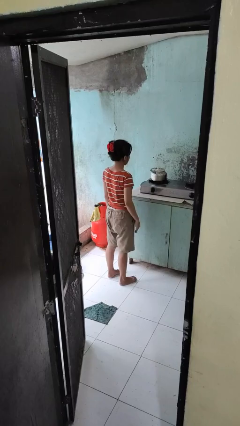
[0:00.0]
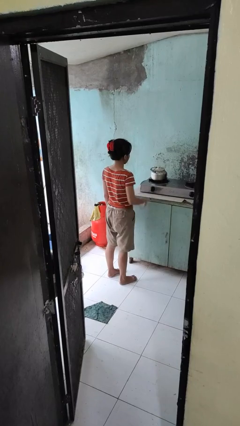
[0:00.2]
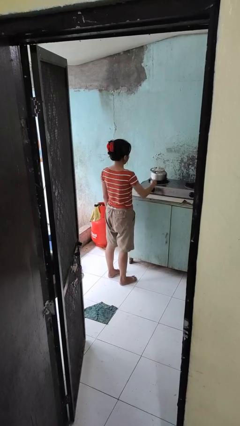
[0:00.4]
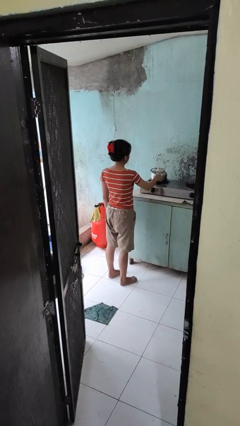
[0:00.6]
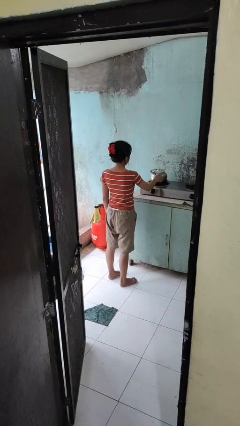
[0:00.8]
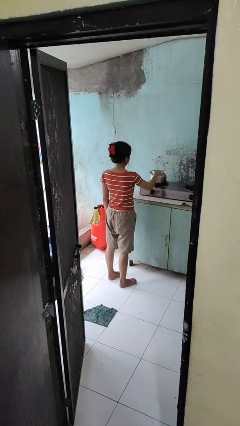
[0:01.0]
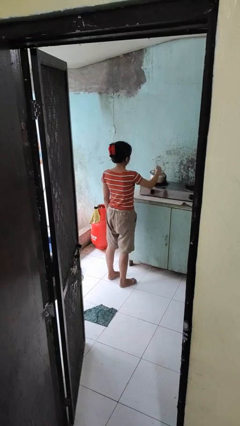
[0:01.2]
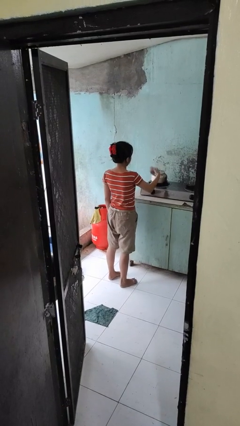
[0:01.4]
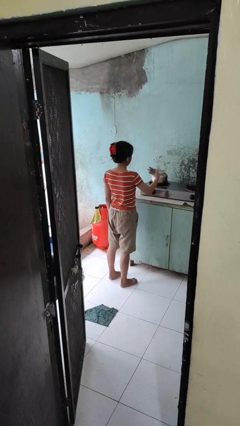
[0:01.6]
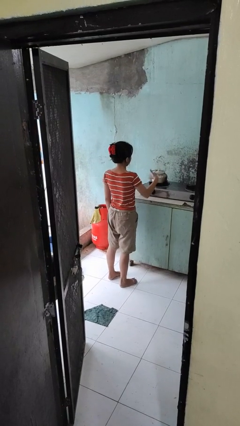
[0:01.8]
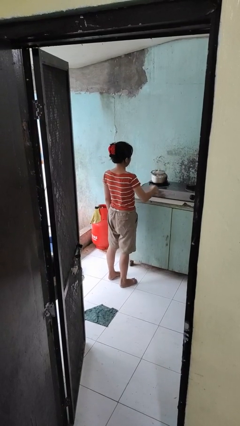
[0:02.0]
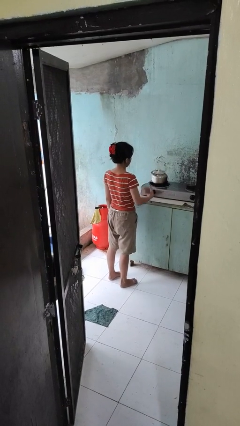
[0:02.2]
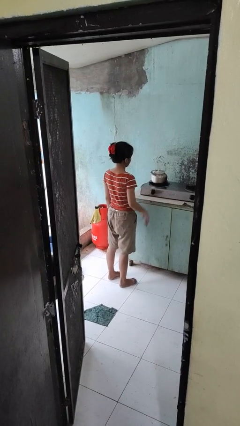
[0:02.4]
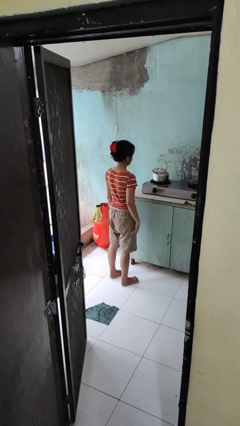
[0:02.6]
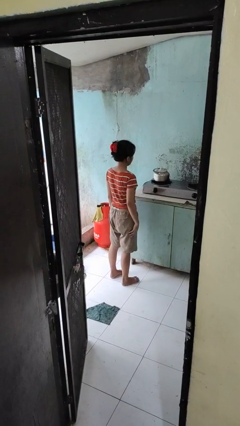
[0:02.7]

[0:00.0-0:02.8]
person burns hand

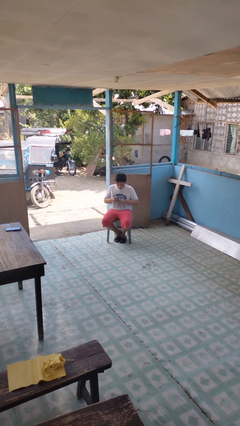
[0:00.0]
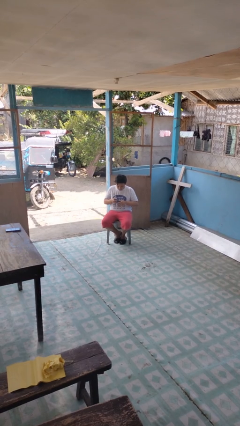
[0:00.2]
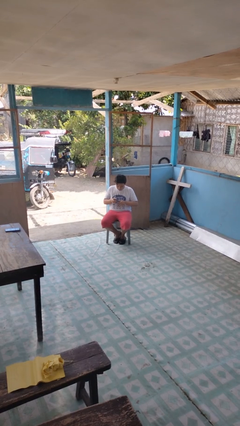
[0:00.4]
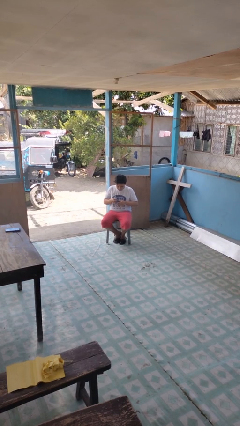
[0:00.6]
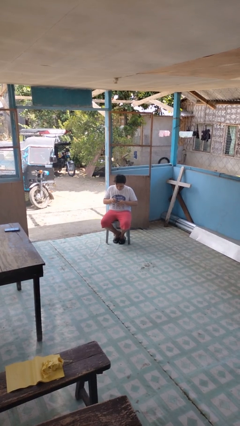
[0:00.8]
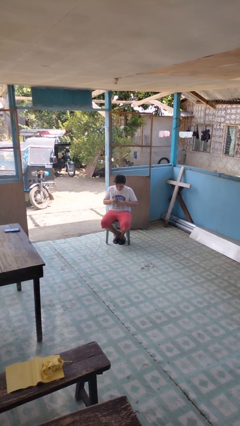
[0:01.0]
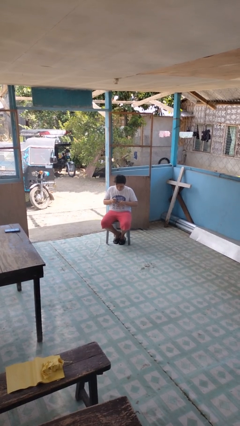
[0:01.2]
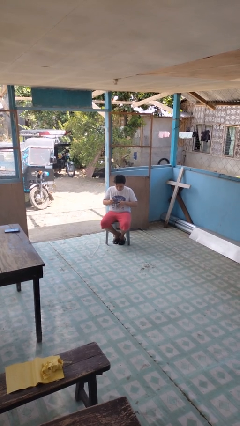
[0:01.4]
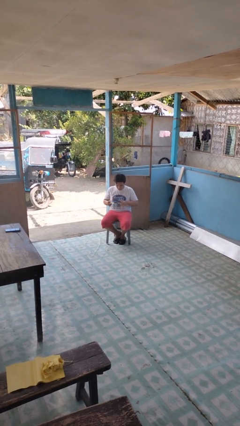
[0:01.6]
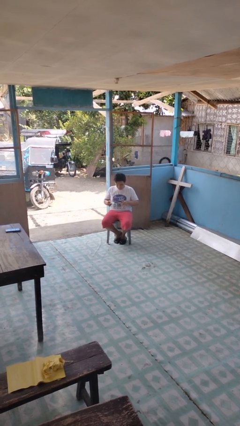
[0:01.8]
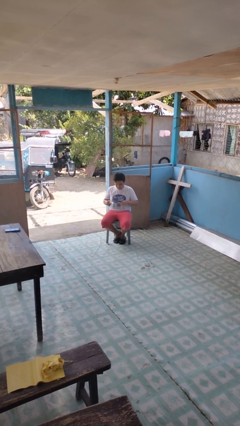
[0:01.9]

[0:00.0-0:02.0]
person clips fingernails

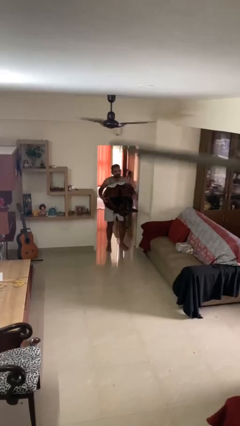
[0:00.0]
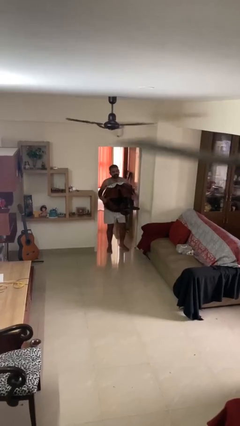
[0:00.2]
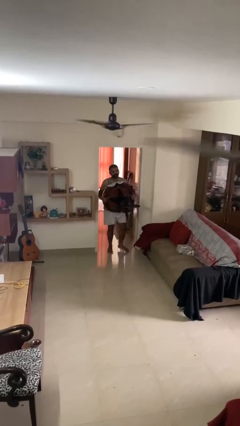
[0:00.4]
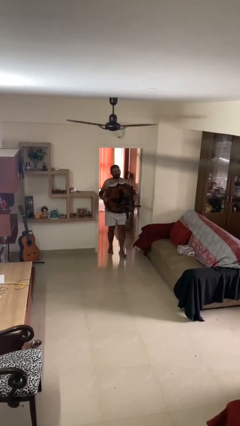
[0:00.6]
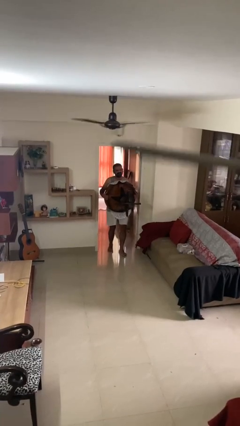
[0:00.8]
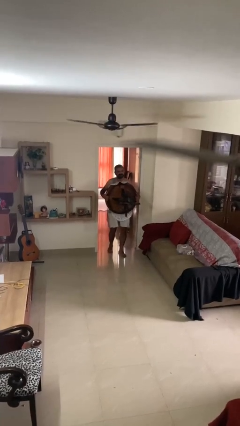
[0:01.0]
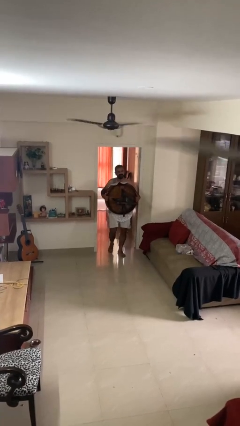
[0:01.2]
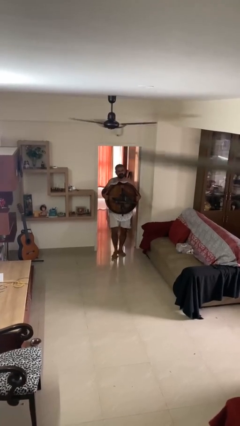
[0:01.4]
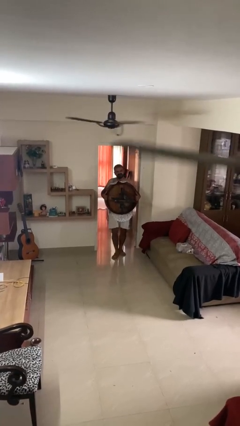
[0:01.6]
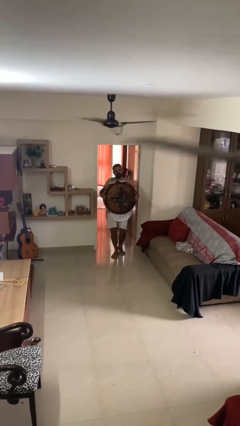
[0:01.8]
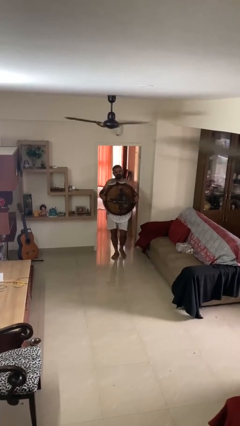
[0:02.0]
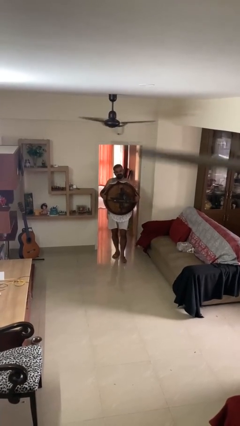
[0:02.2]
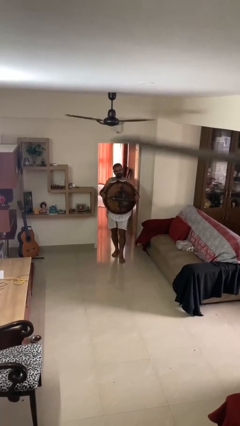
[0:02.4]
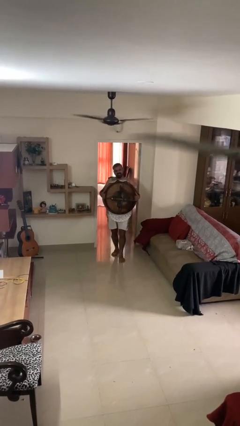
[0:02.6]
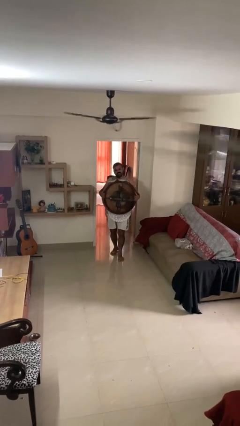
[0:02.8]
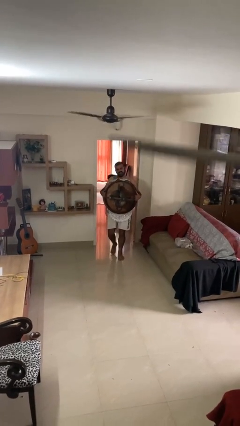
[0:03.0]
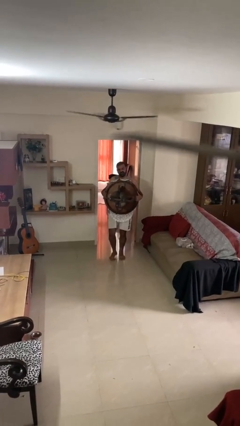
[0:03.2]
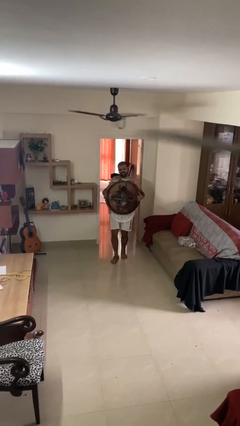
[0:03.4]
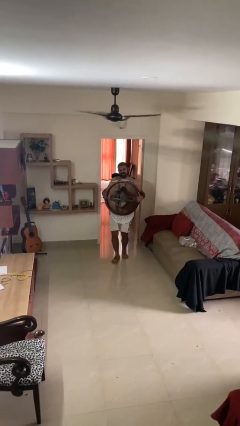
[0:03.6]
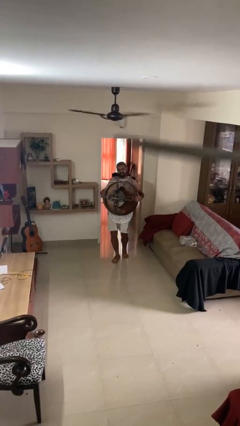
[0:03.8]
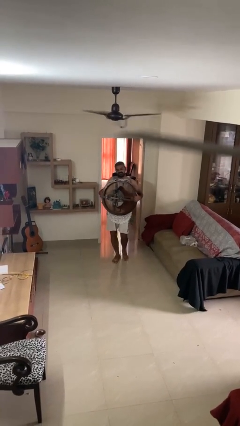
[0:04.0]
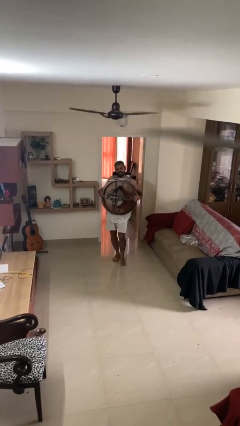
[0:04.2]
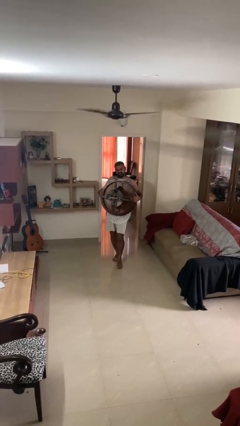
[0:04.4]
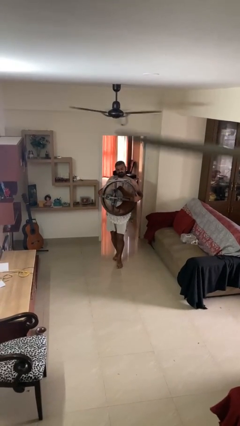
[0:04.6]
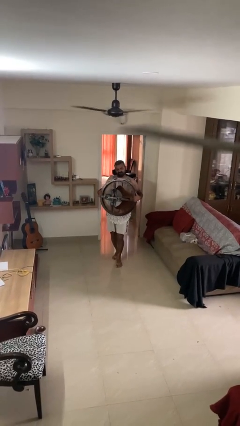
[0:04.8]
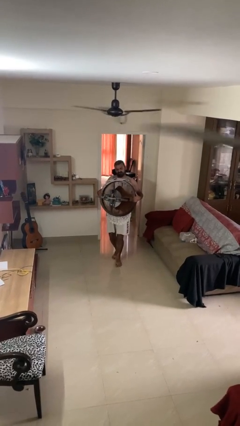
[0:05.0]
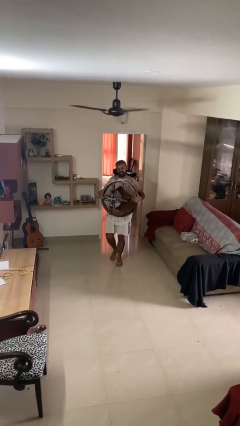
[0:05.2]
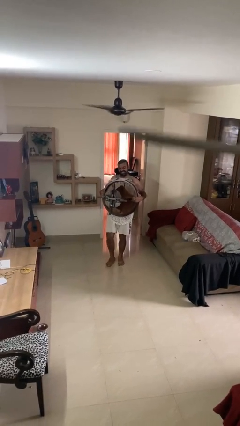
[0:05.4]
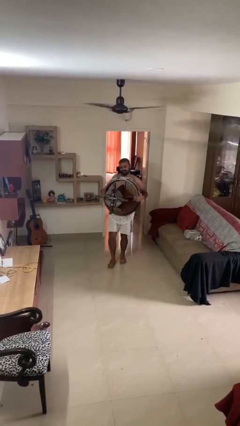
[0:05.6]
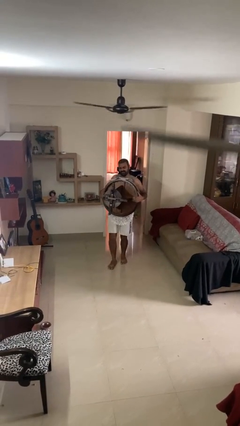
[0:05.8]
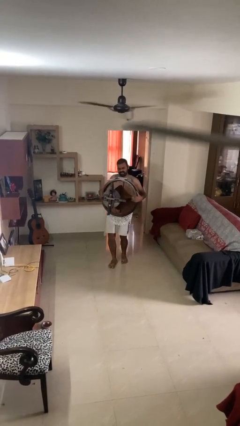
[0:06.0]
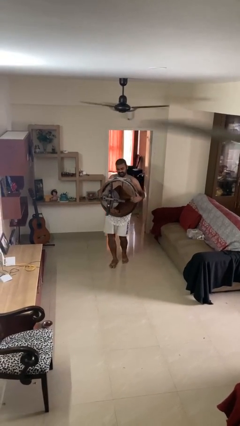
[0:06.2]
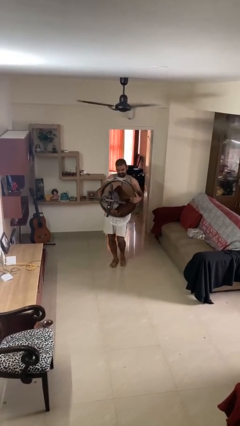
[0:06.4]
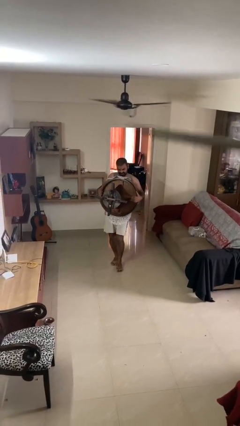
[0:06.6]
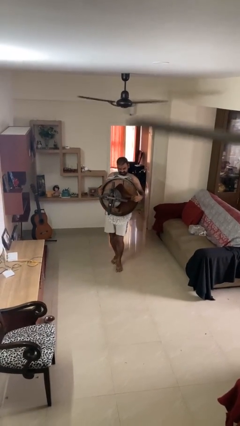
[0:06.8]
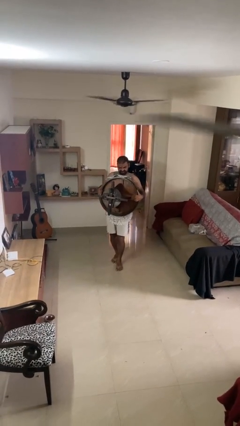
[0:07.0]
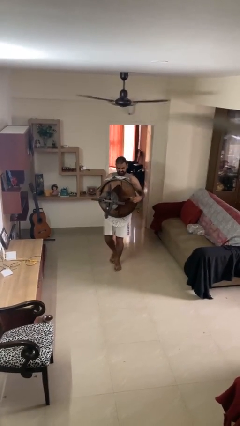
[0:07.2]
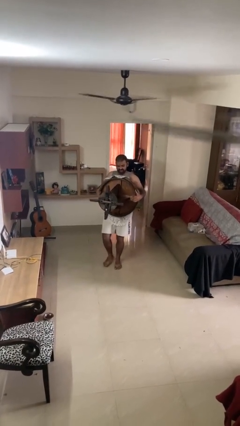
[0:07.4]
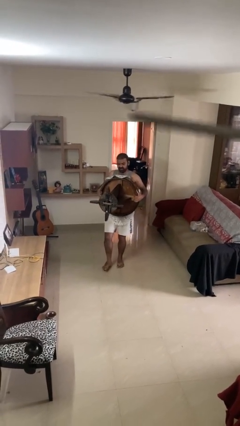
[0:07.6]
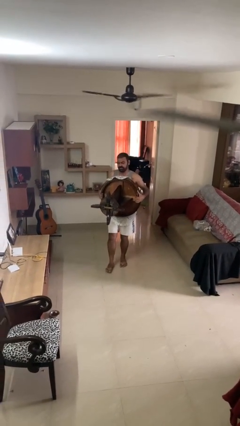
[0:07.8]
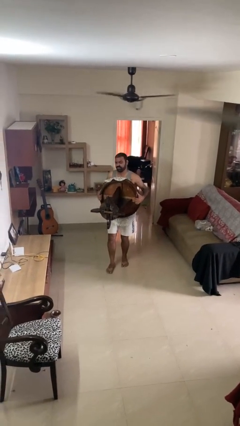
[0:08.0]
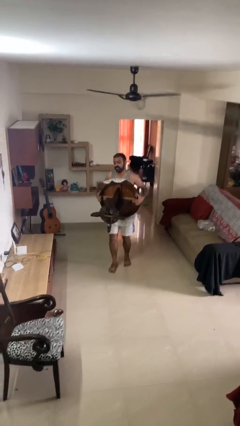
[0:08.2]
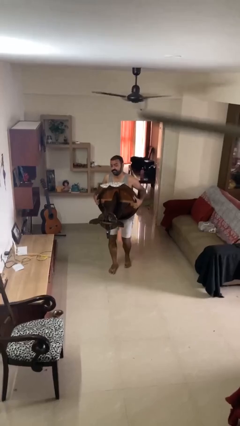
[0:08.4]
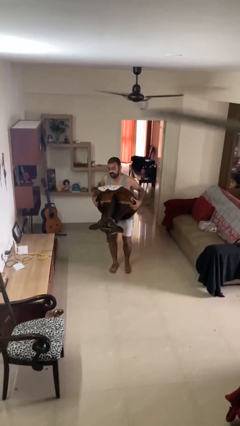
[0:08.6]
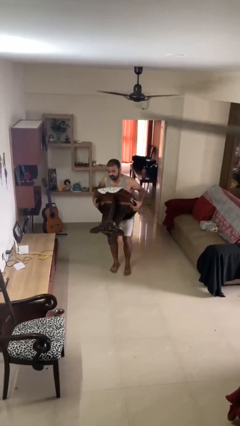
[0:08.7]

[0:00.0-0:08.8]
person carries heavy object

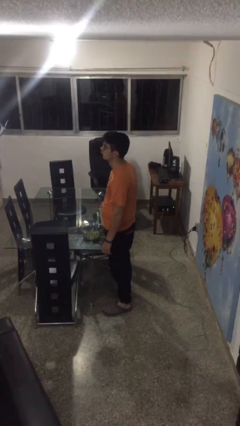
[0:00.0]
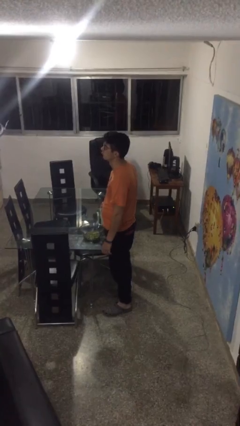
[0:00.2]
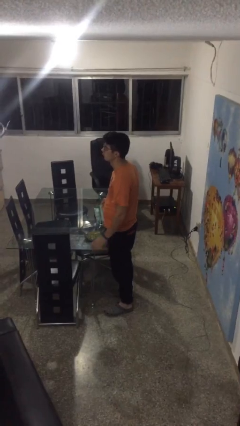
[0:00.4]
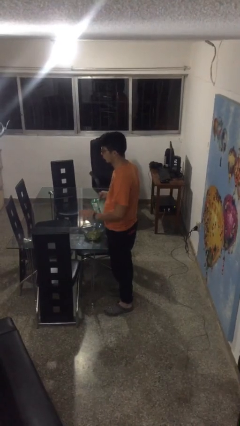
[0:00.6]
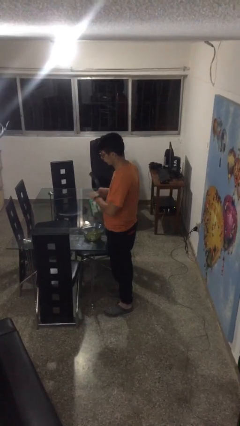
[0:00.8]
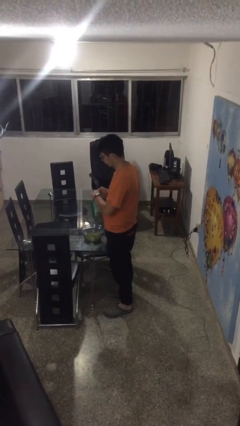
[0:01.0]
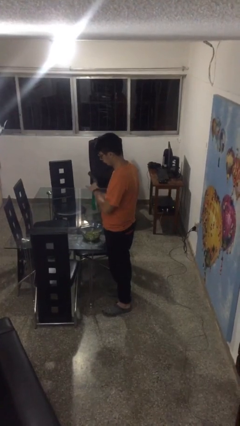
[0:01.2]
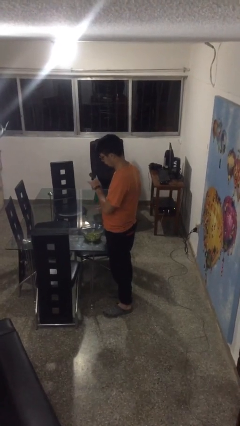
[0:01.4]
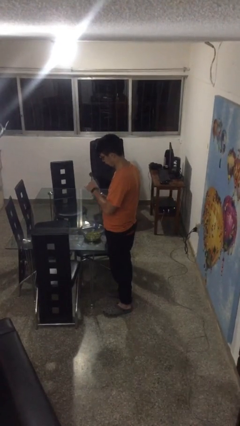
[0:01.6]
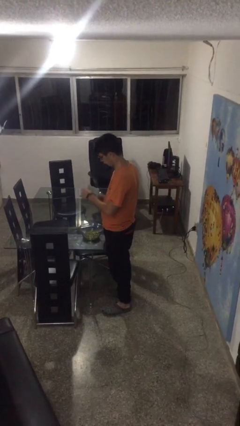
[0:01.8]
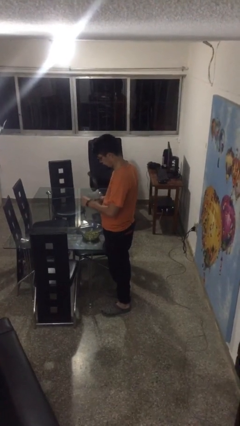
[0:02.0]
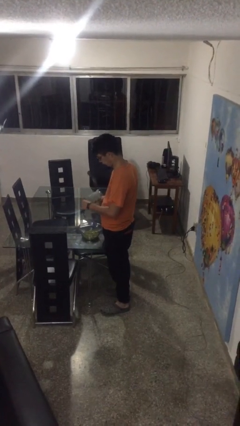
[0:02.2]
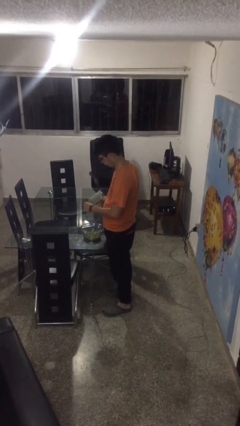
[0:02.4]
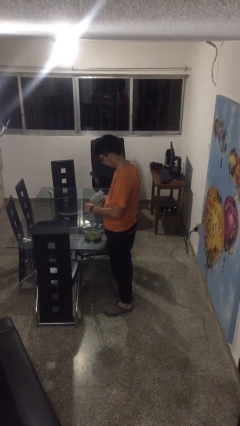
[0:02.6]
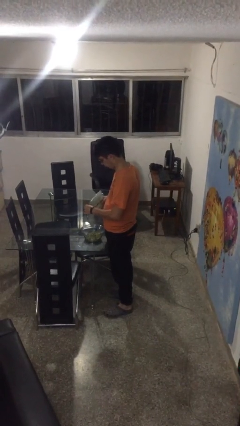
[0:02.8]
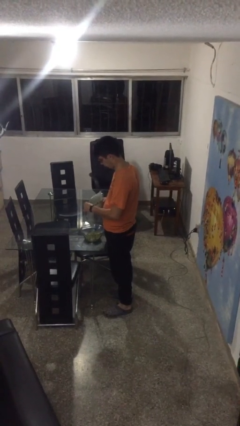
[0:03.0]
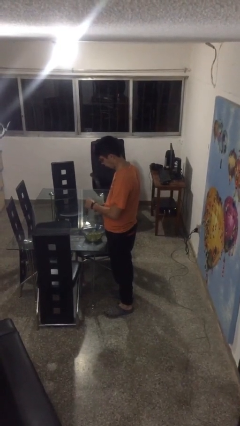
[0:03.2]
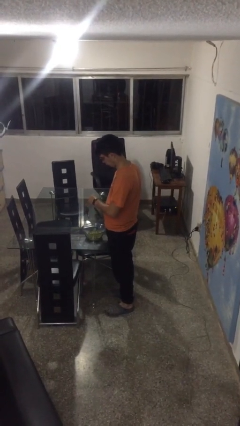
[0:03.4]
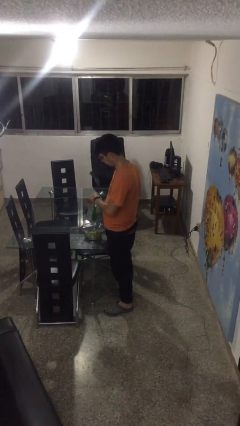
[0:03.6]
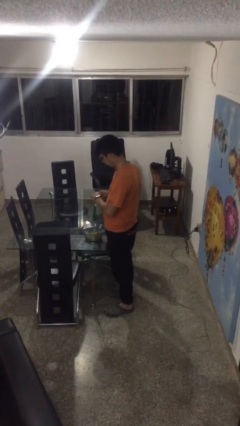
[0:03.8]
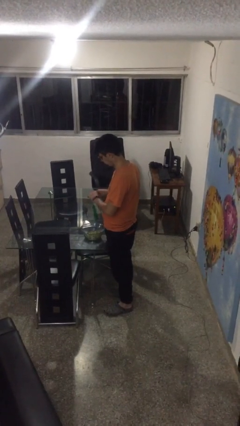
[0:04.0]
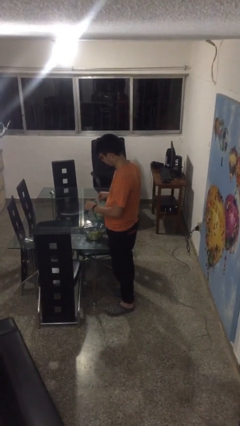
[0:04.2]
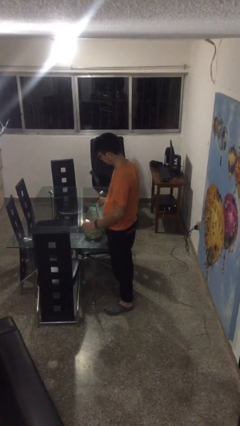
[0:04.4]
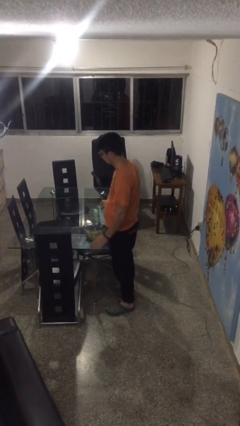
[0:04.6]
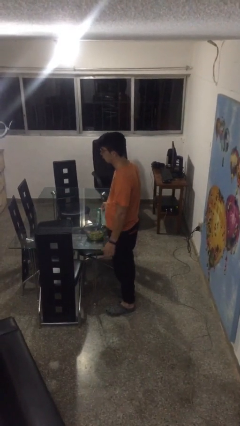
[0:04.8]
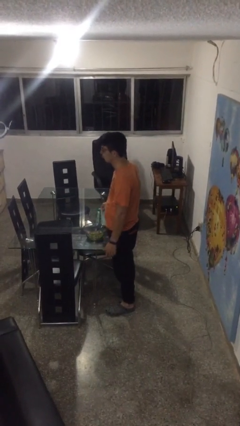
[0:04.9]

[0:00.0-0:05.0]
person pours into bowl
